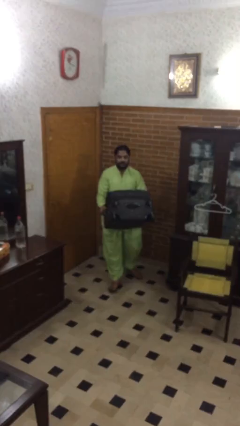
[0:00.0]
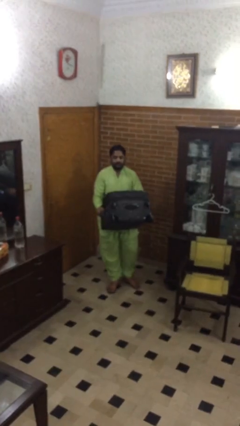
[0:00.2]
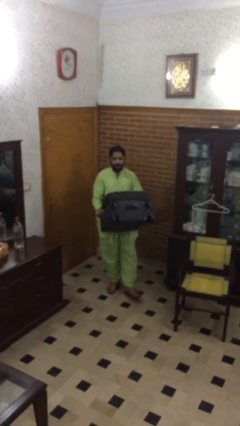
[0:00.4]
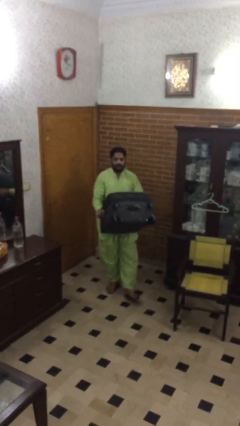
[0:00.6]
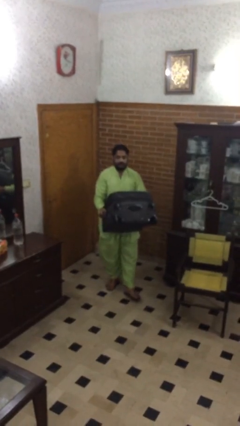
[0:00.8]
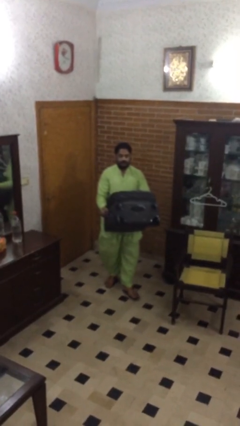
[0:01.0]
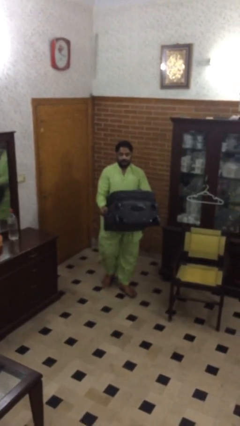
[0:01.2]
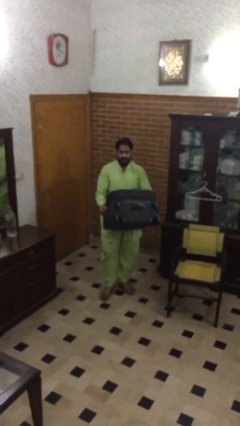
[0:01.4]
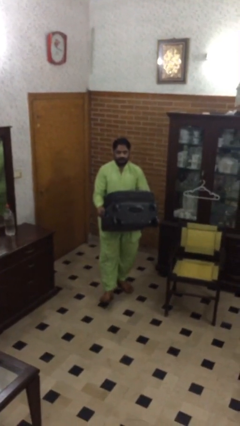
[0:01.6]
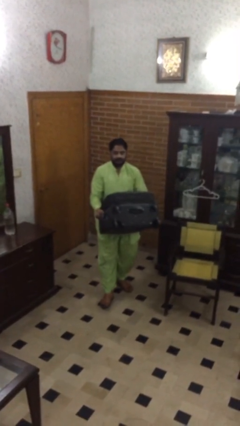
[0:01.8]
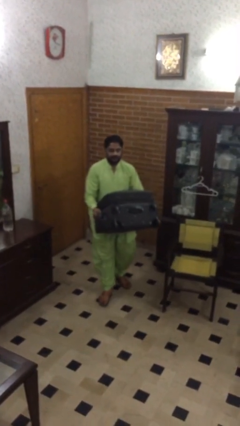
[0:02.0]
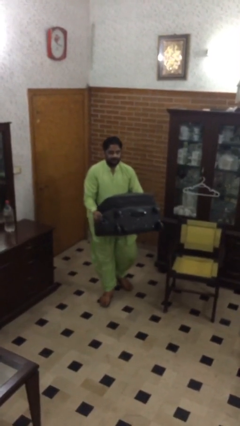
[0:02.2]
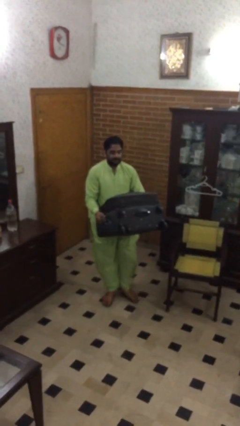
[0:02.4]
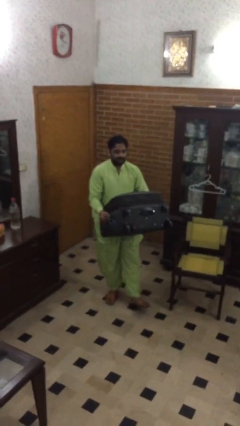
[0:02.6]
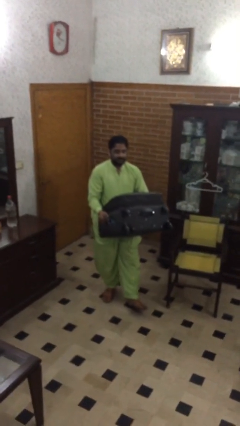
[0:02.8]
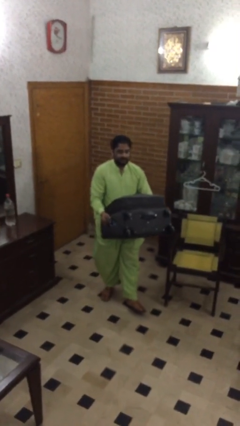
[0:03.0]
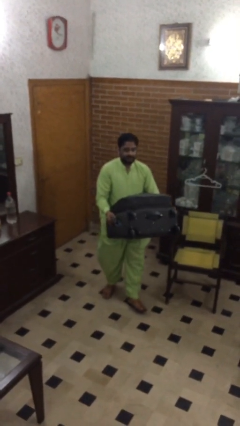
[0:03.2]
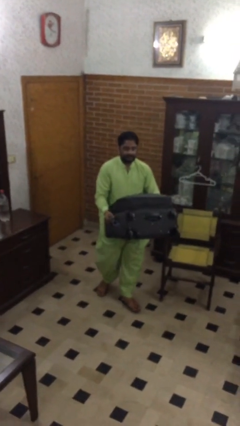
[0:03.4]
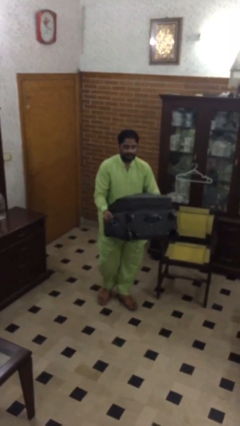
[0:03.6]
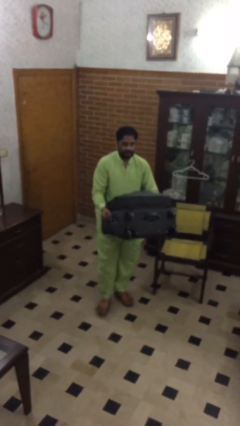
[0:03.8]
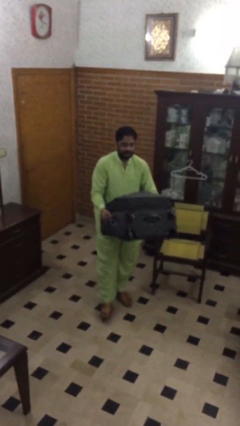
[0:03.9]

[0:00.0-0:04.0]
person carries heavy object

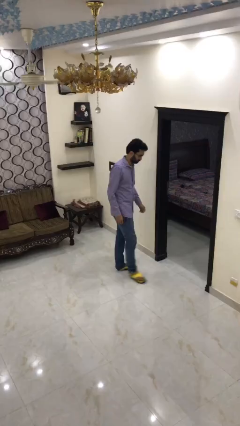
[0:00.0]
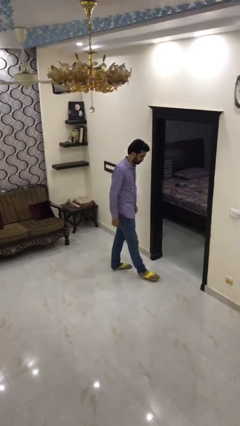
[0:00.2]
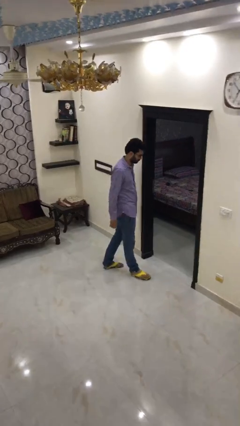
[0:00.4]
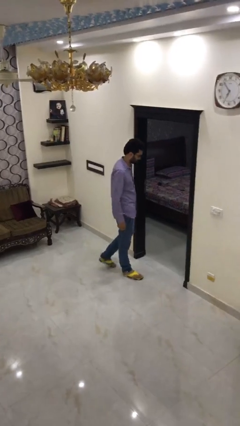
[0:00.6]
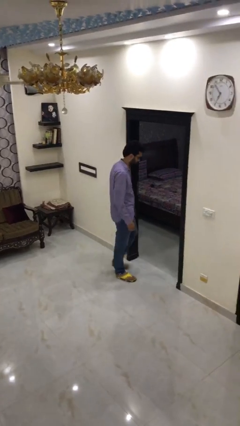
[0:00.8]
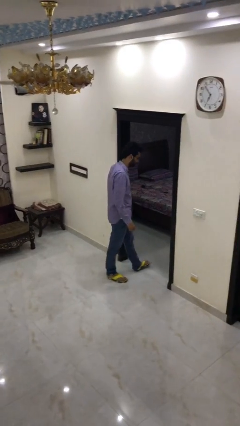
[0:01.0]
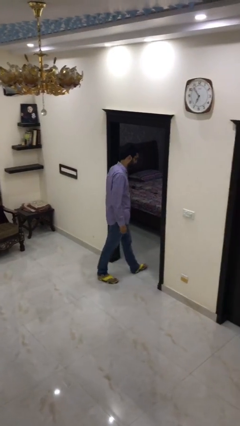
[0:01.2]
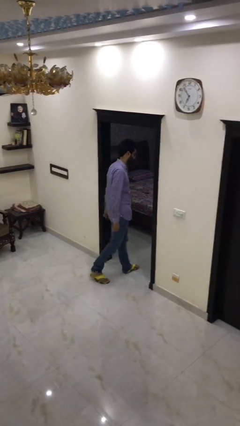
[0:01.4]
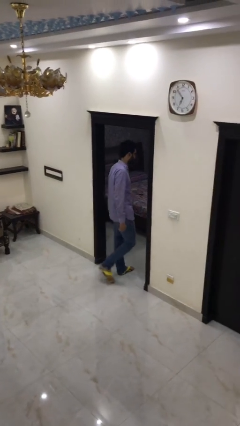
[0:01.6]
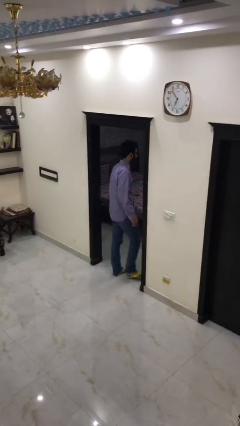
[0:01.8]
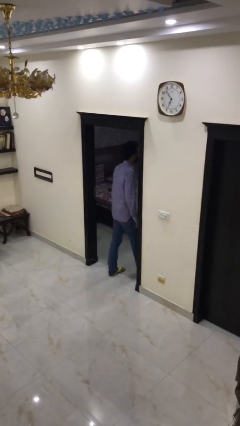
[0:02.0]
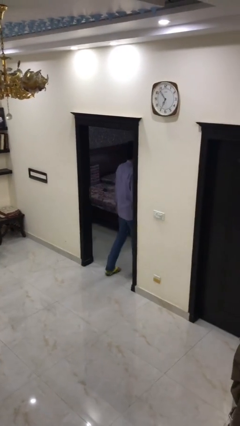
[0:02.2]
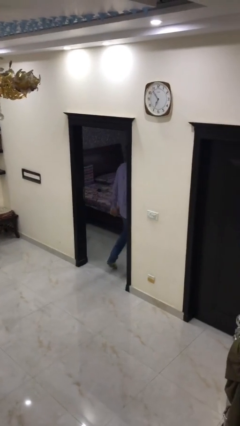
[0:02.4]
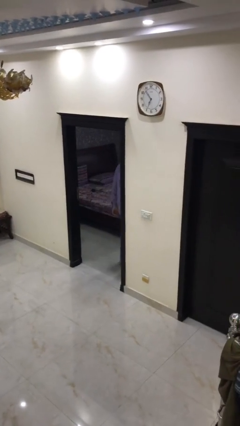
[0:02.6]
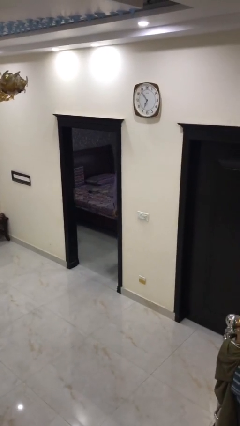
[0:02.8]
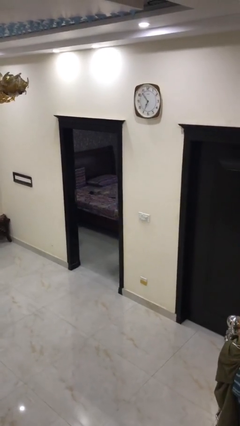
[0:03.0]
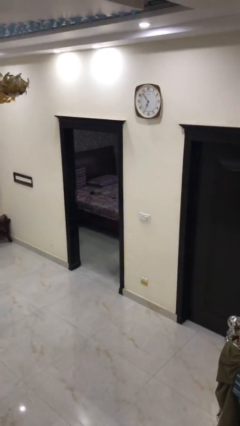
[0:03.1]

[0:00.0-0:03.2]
person exits scene through structure

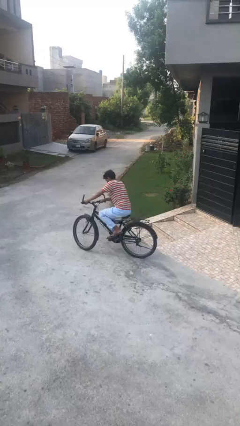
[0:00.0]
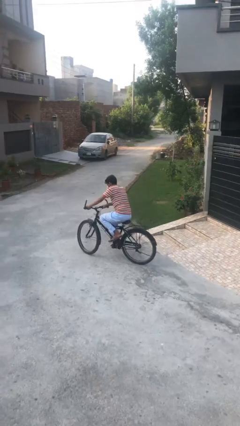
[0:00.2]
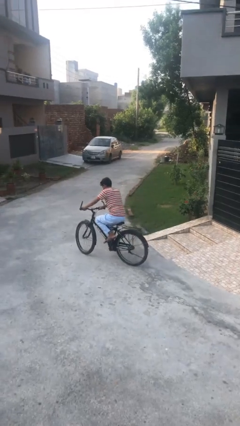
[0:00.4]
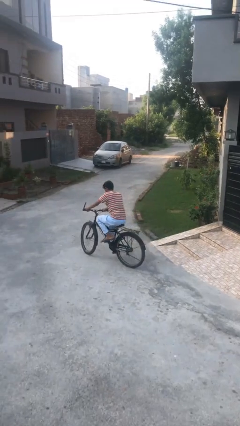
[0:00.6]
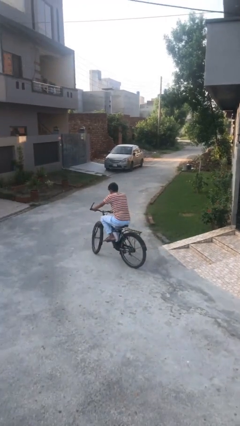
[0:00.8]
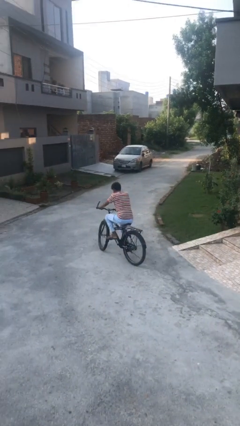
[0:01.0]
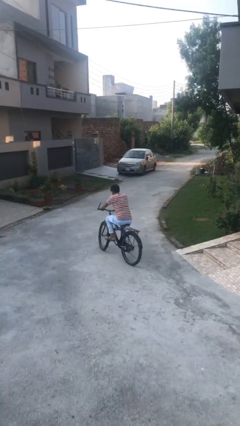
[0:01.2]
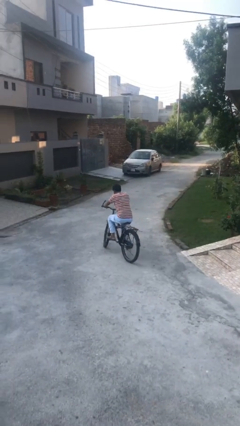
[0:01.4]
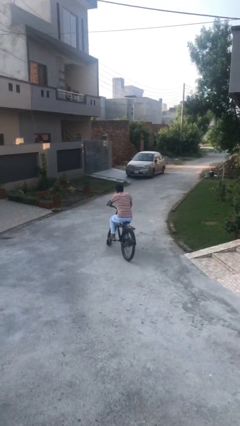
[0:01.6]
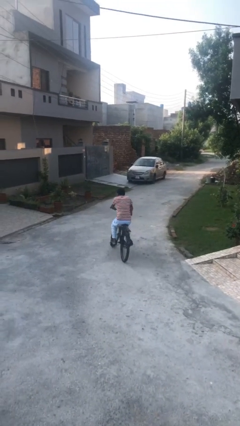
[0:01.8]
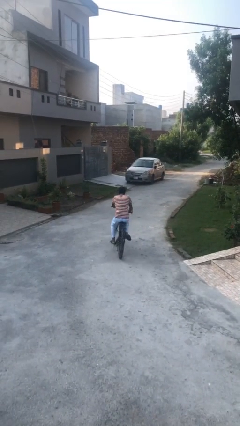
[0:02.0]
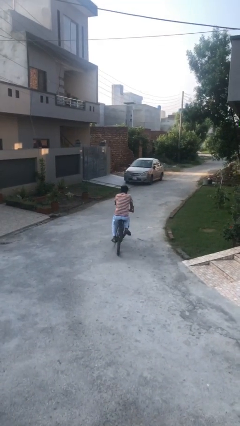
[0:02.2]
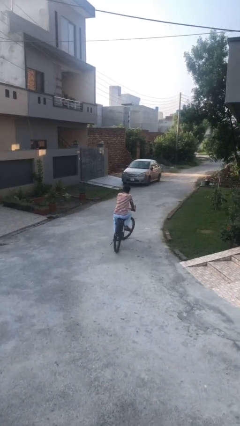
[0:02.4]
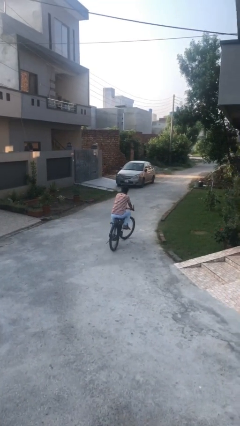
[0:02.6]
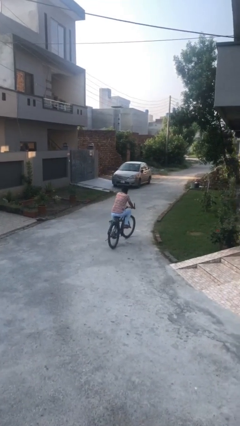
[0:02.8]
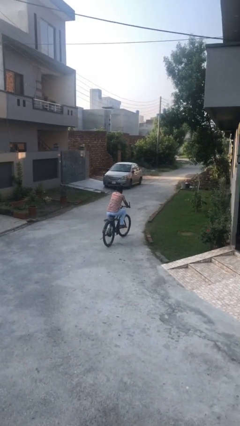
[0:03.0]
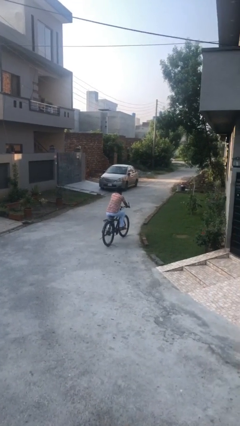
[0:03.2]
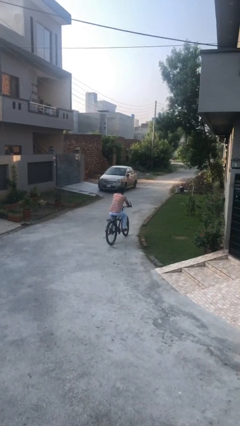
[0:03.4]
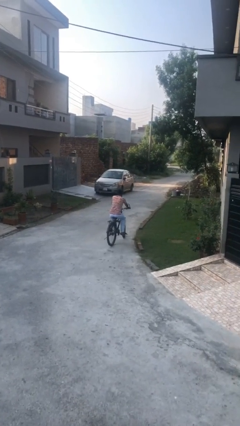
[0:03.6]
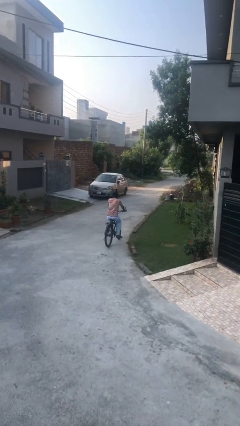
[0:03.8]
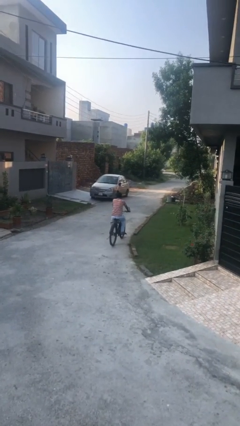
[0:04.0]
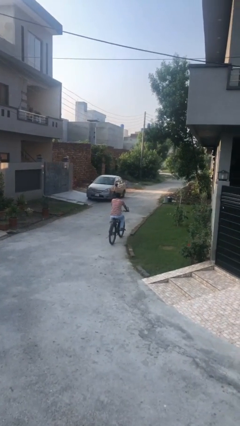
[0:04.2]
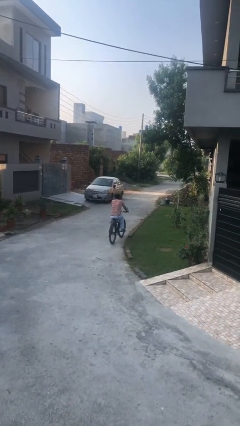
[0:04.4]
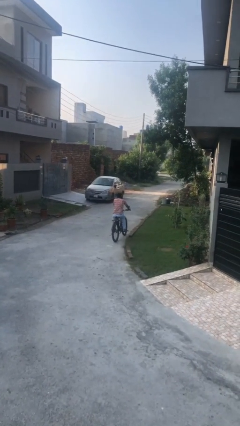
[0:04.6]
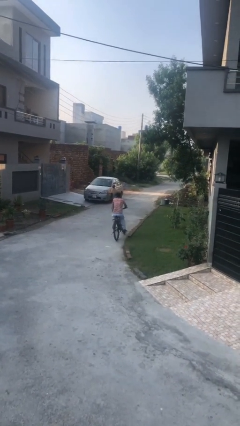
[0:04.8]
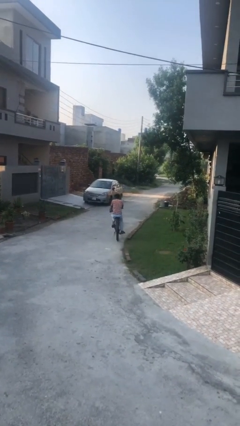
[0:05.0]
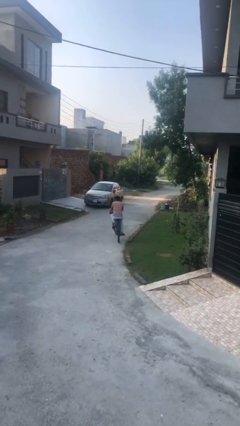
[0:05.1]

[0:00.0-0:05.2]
person rides bicycle

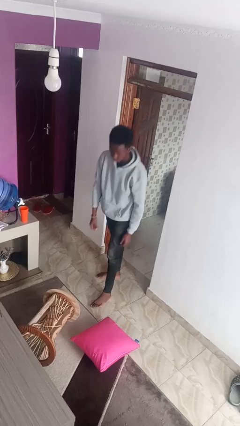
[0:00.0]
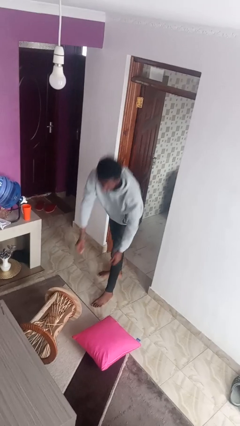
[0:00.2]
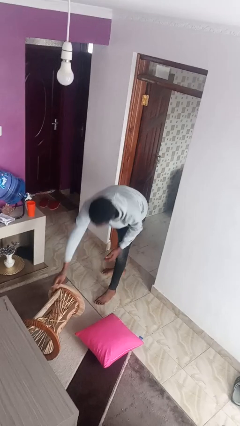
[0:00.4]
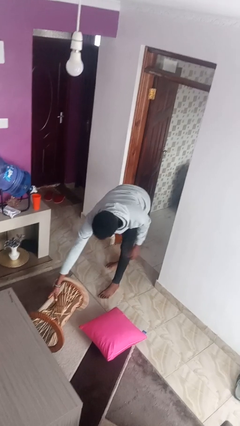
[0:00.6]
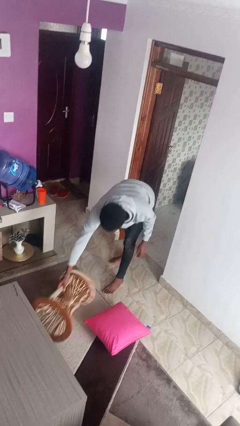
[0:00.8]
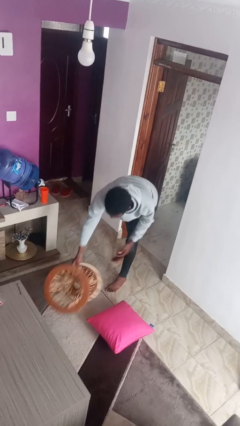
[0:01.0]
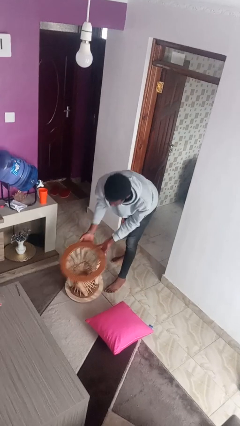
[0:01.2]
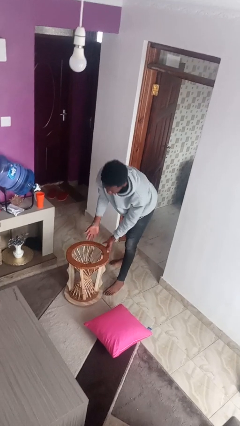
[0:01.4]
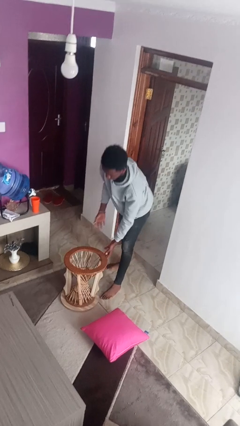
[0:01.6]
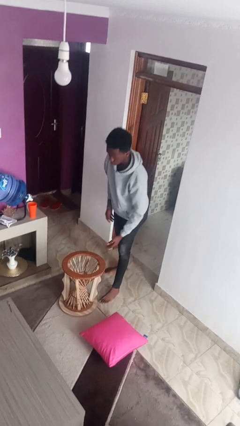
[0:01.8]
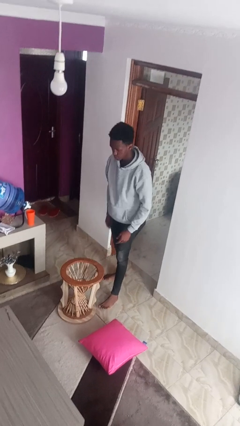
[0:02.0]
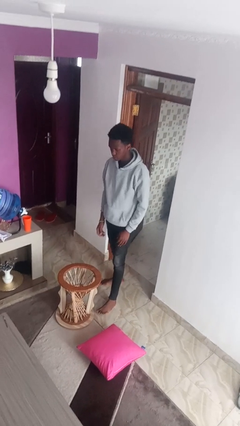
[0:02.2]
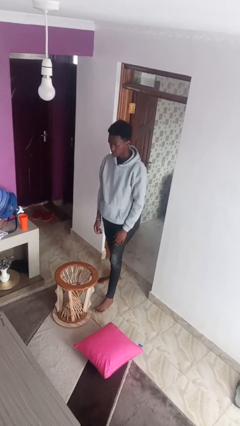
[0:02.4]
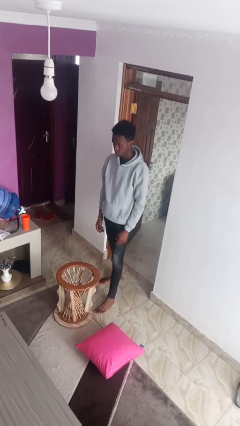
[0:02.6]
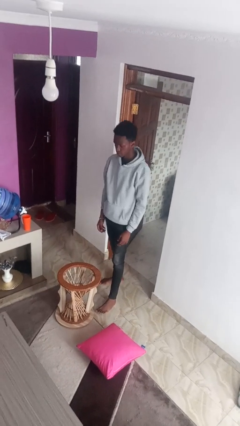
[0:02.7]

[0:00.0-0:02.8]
person sets upright furniture

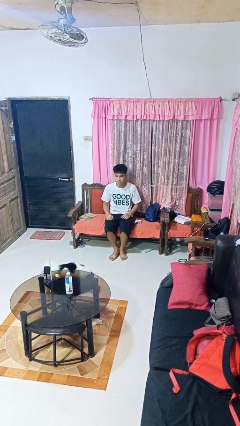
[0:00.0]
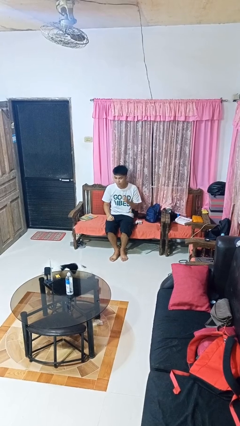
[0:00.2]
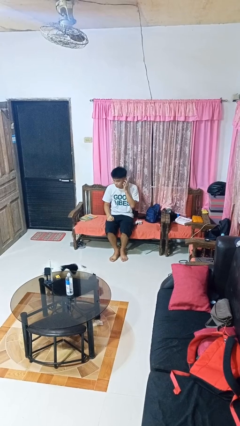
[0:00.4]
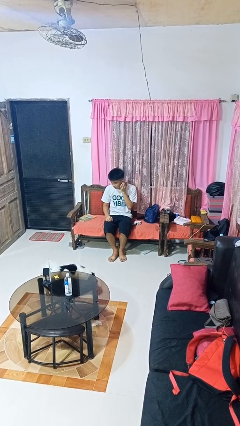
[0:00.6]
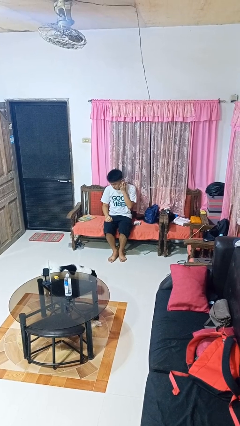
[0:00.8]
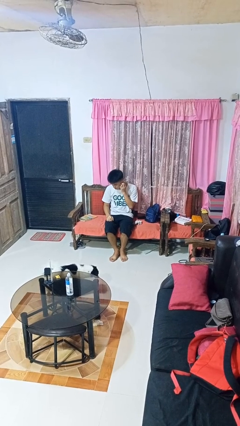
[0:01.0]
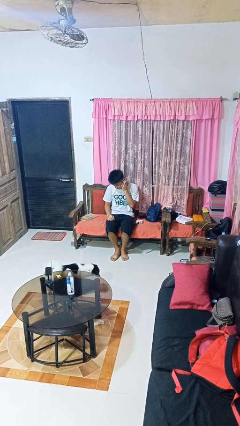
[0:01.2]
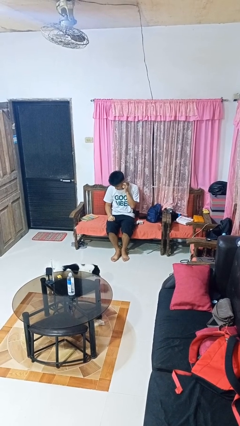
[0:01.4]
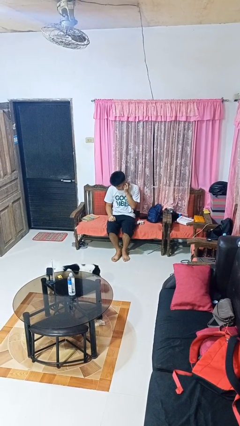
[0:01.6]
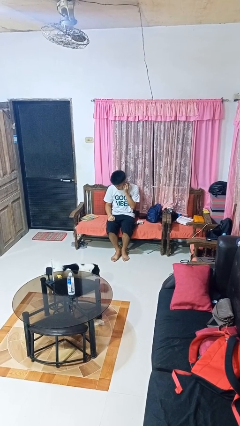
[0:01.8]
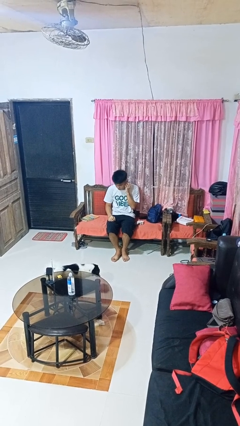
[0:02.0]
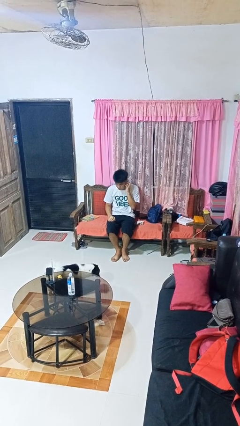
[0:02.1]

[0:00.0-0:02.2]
person touches earlobe
